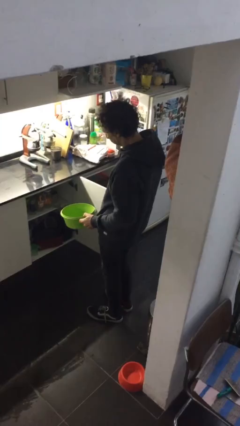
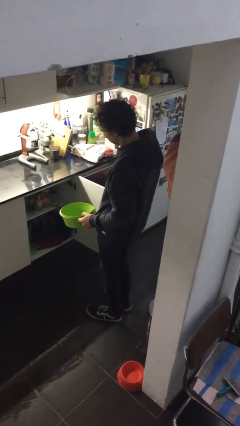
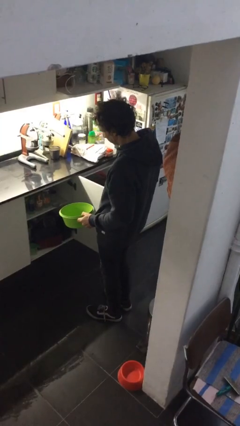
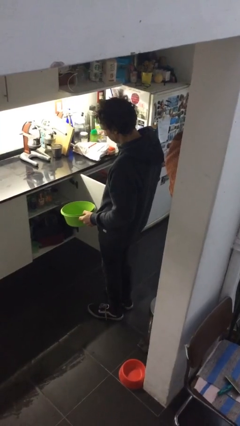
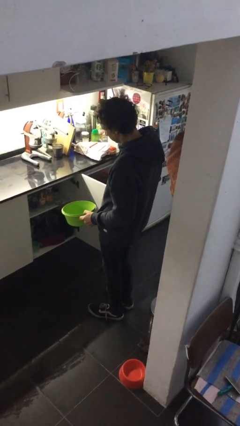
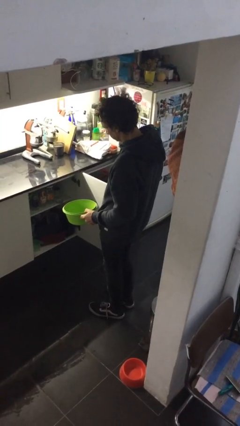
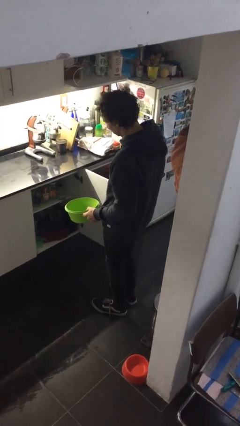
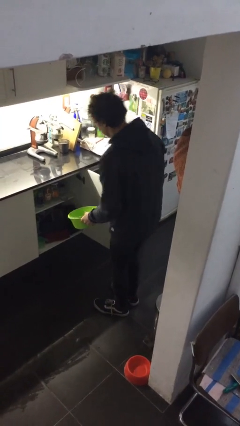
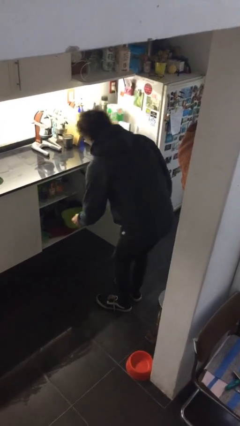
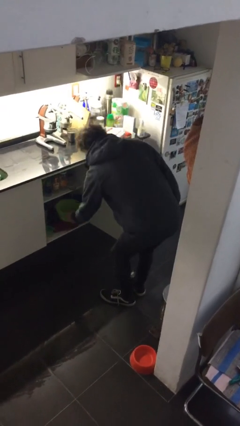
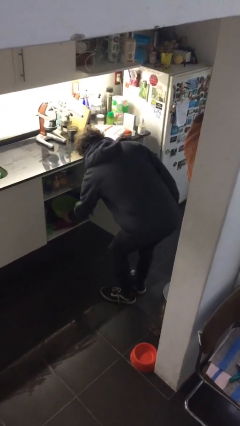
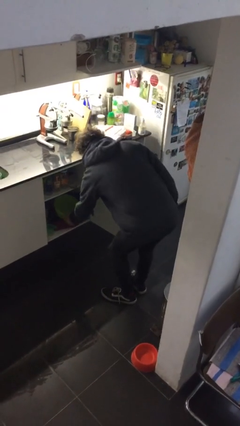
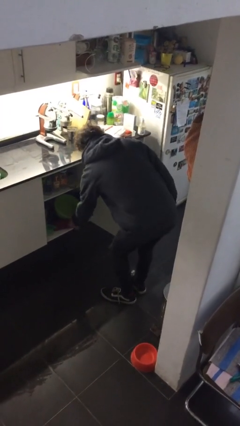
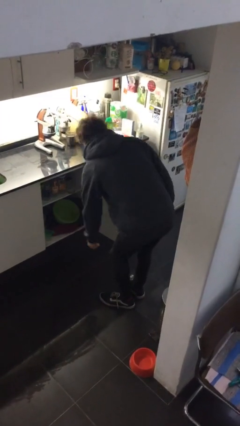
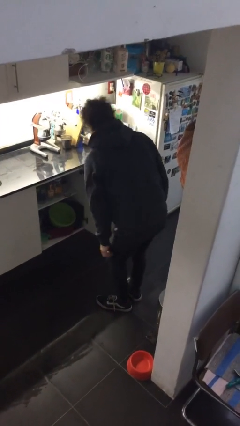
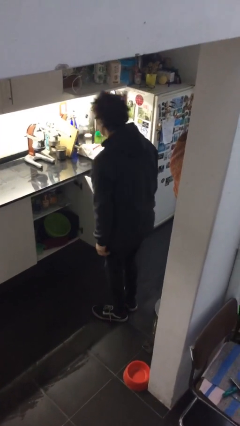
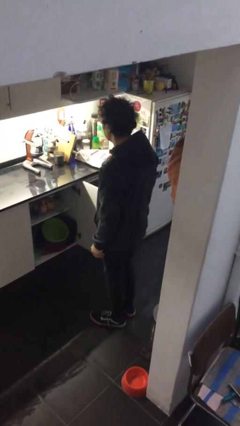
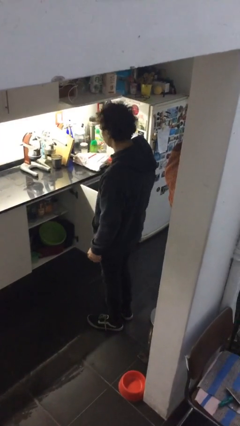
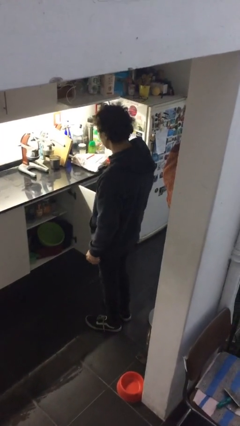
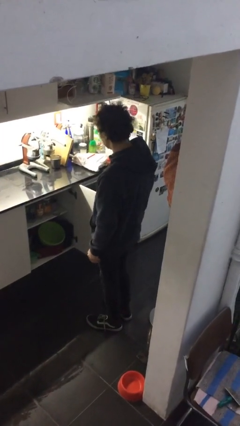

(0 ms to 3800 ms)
person puts down object into cabinet

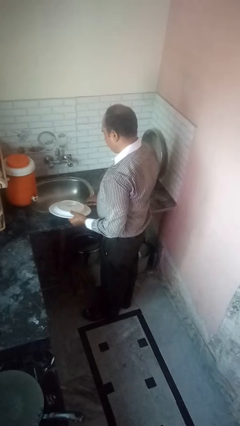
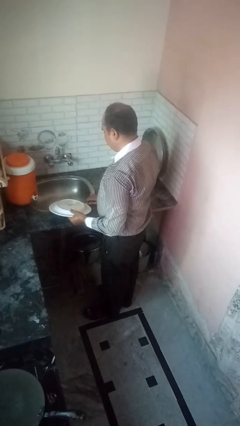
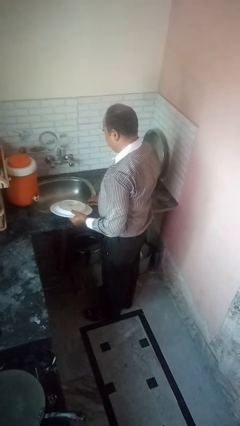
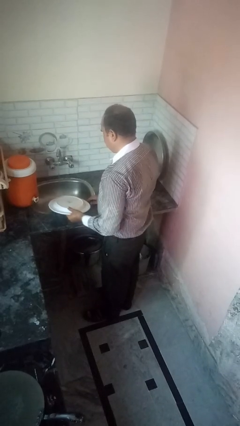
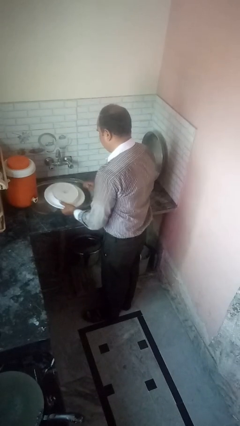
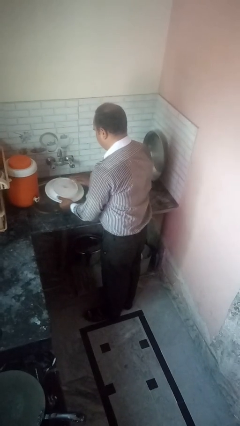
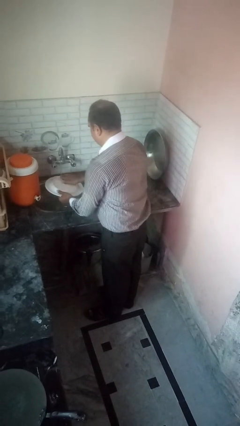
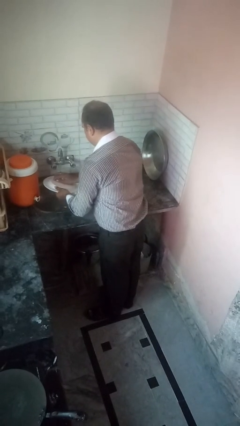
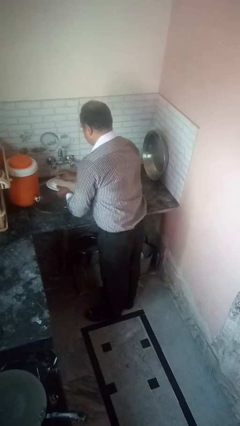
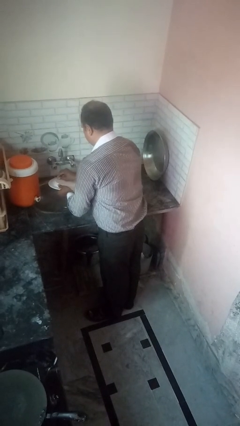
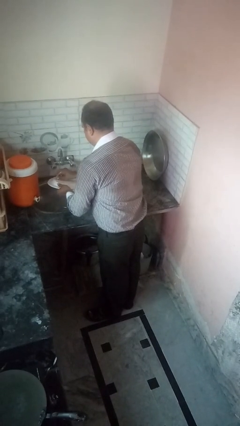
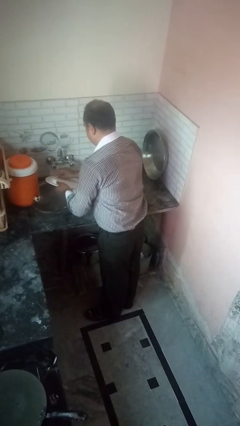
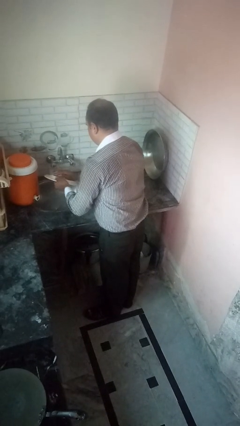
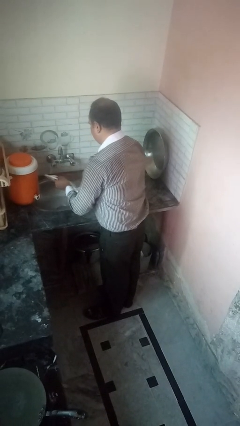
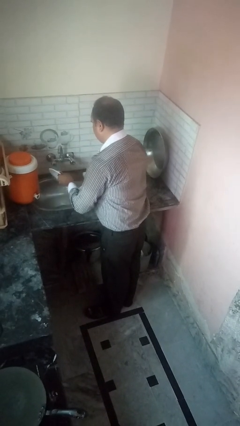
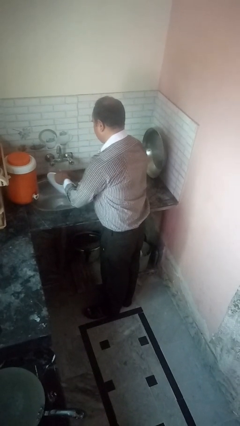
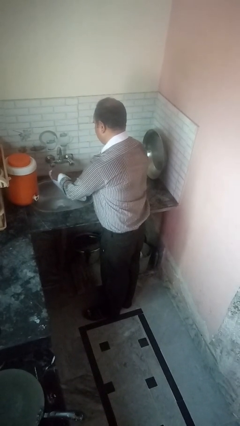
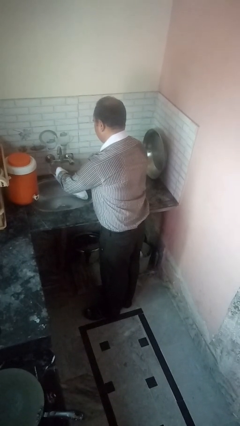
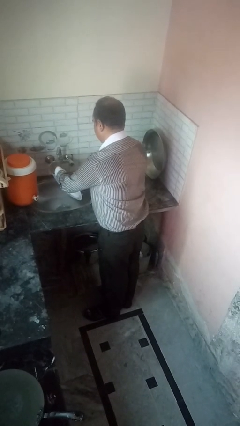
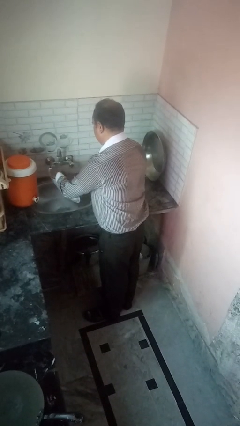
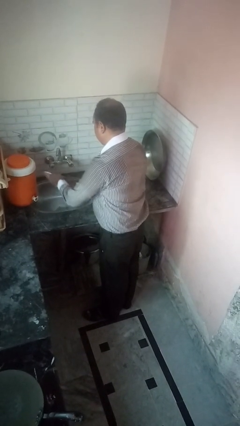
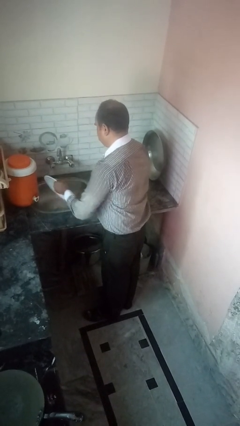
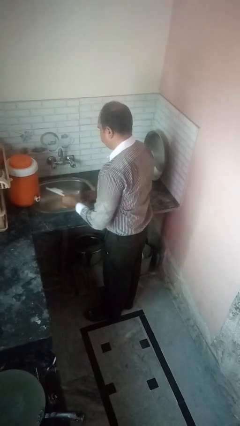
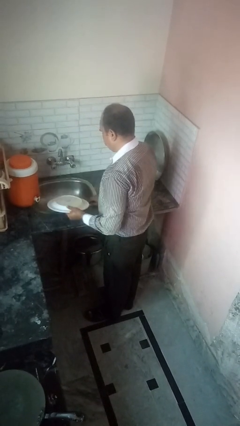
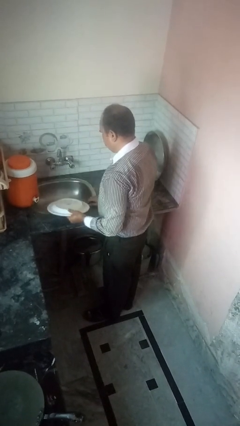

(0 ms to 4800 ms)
person washes dish

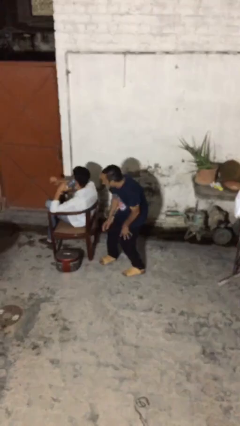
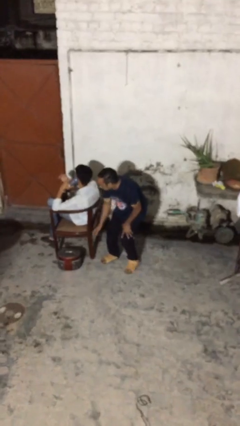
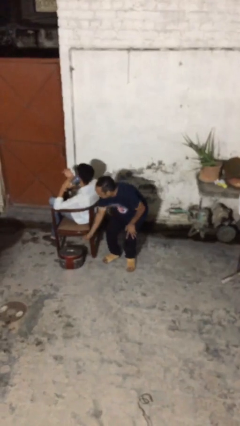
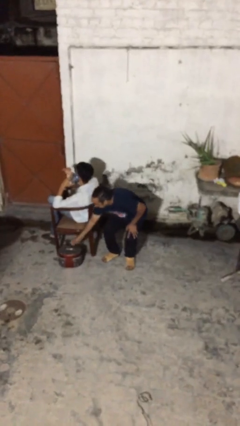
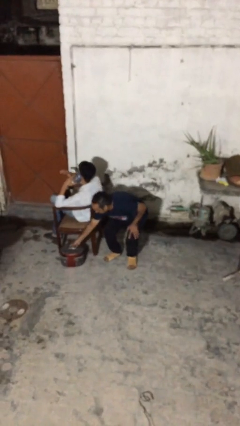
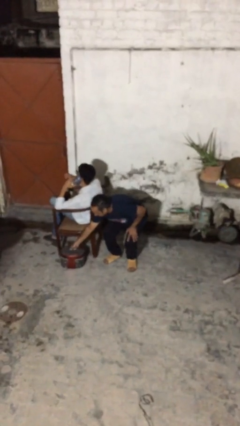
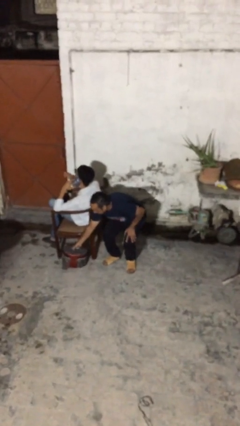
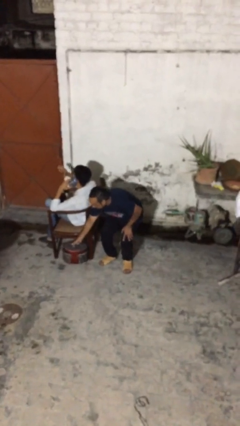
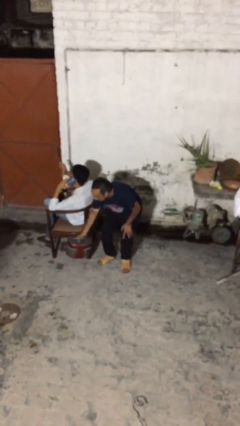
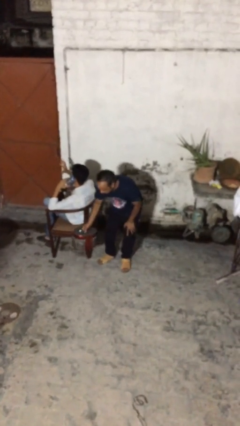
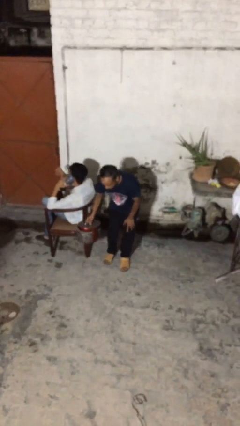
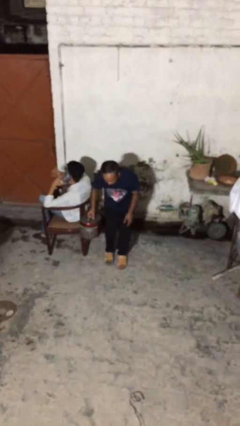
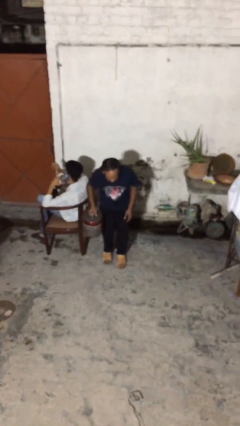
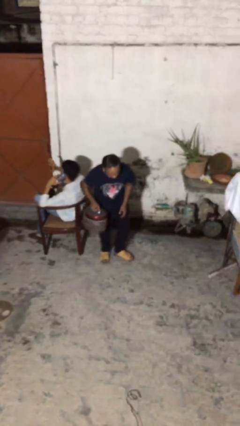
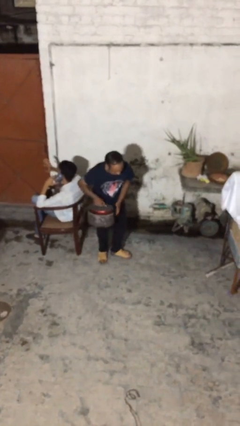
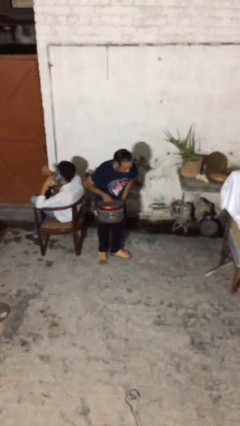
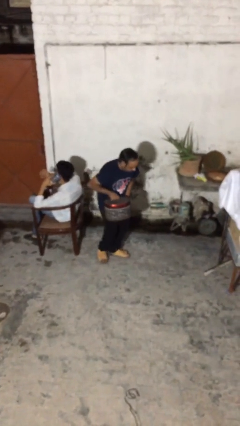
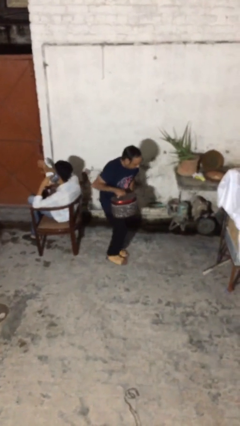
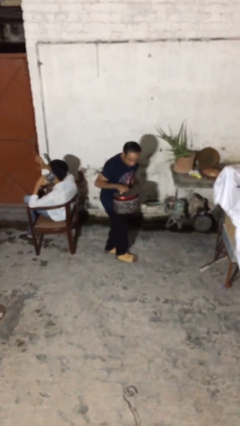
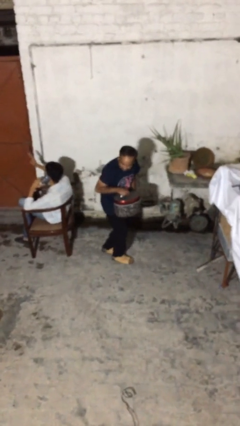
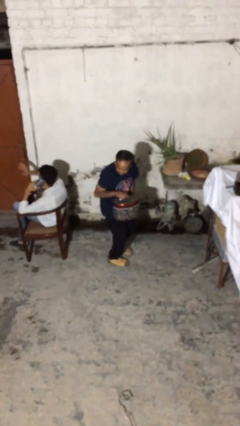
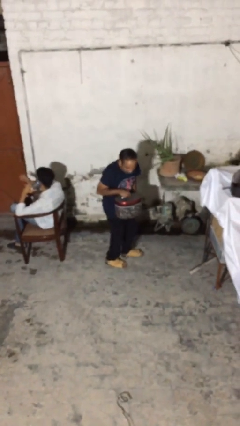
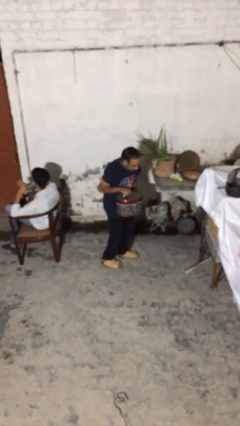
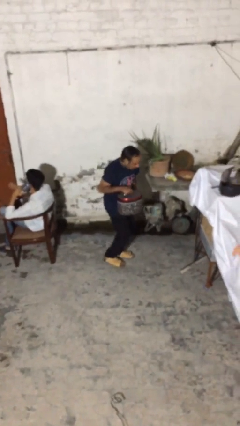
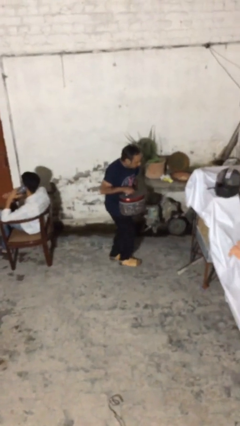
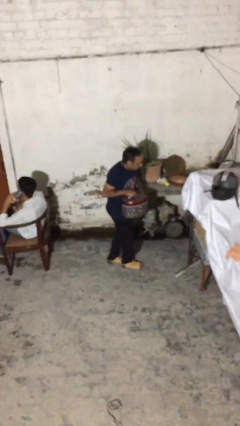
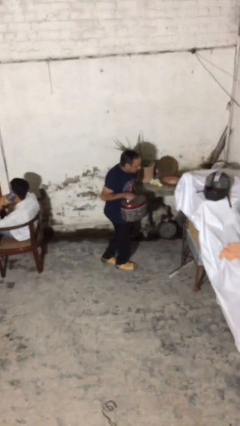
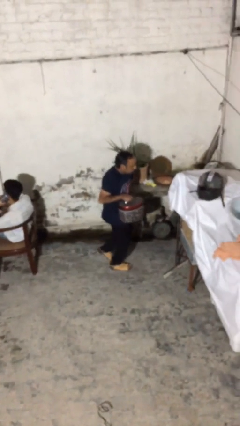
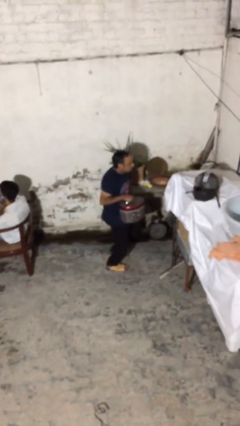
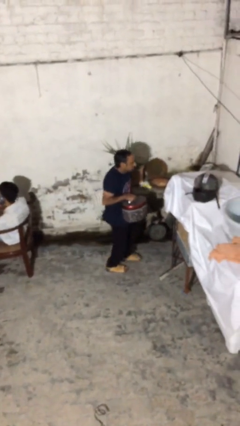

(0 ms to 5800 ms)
person steals object from person

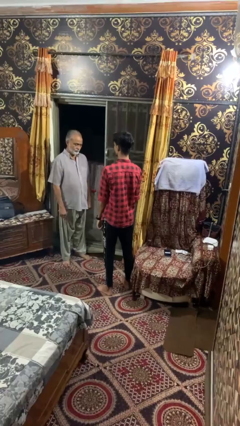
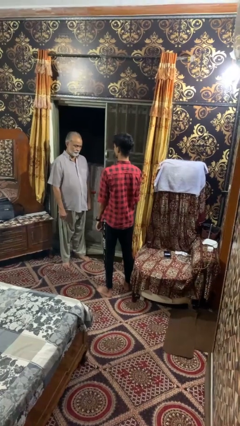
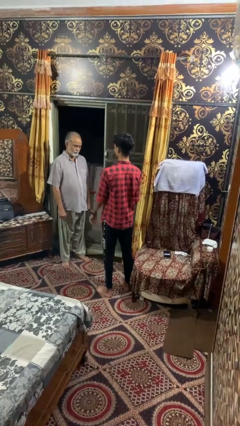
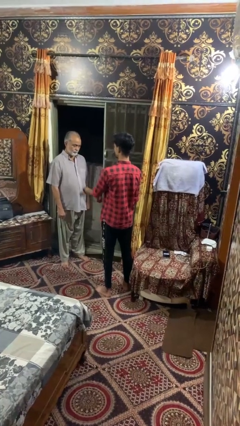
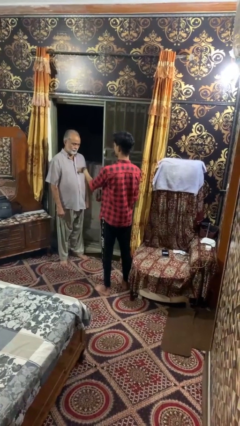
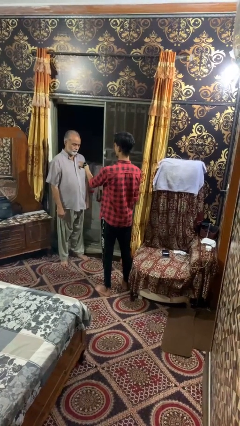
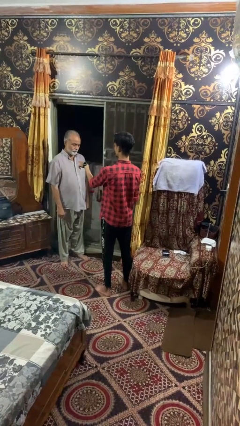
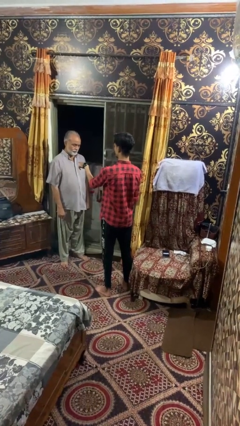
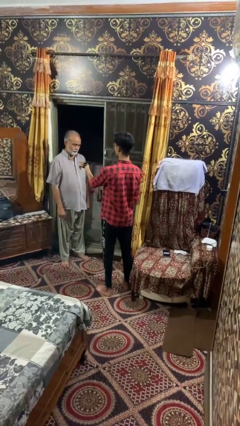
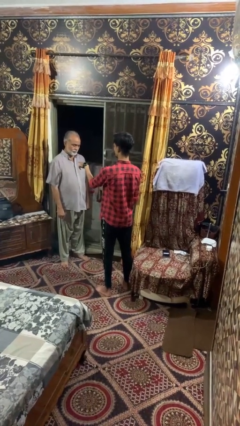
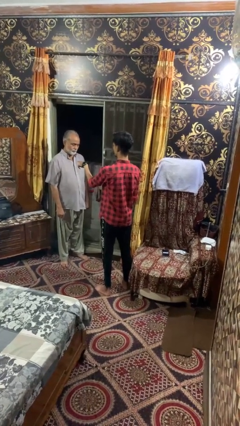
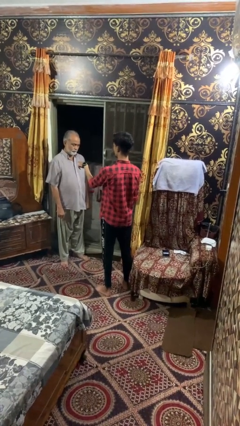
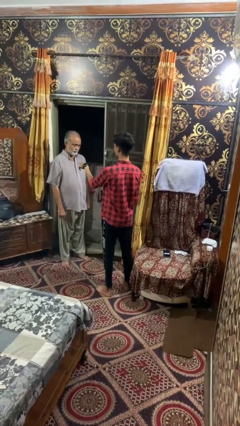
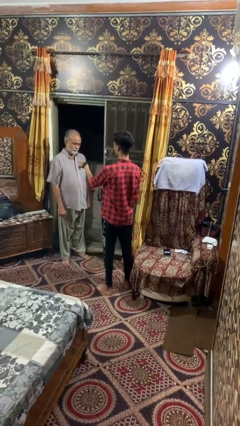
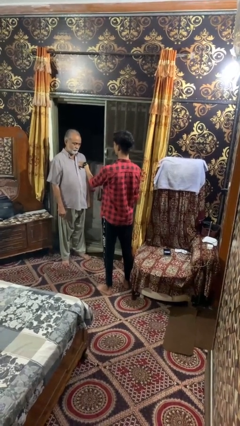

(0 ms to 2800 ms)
person points at person

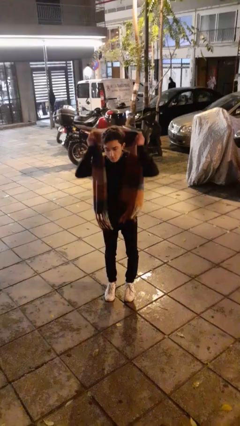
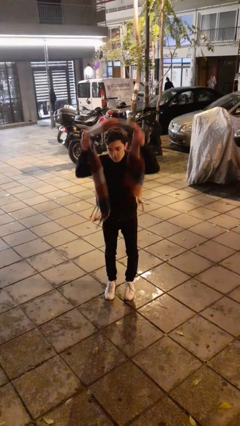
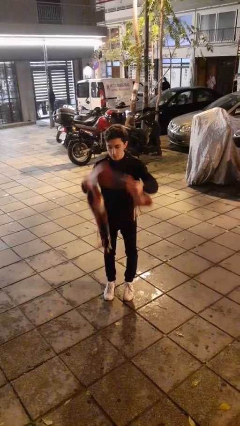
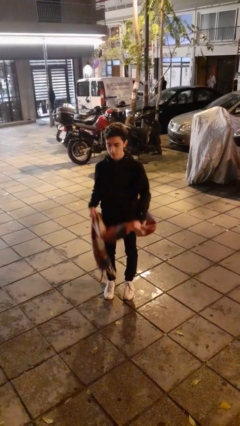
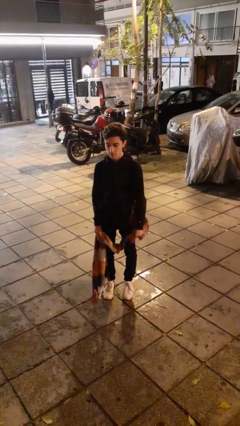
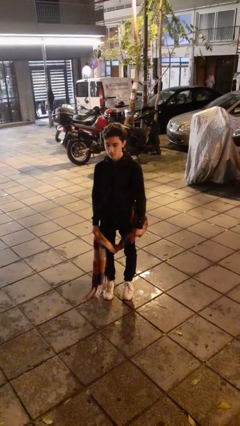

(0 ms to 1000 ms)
person takes off scarf
